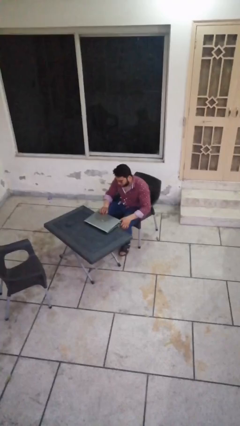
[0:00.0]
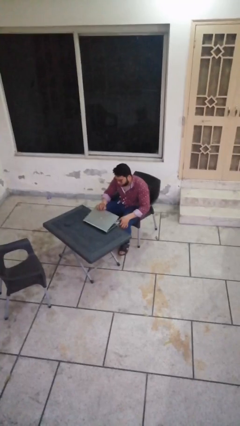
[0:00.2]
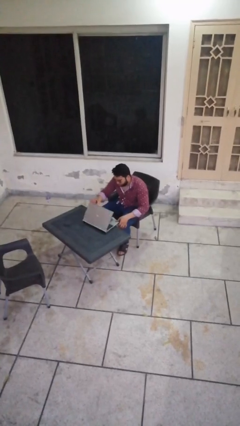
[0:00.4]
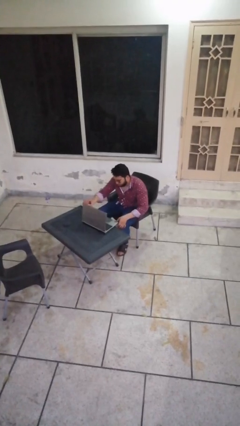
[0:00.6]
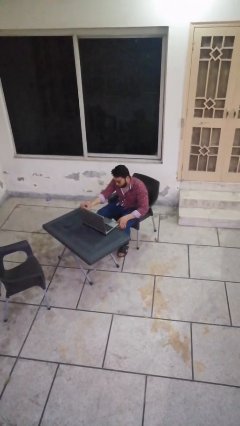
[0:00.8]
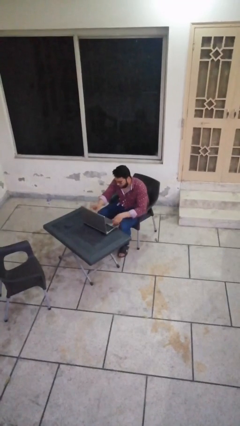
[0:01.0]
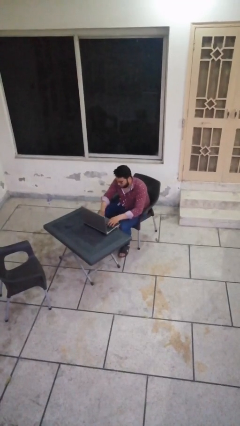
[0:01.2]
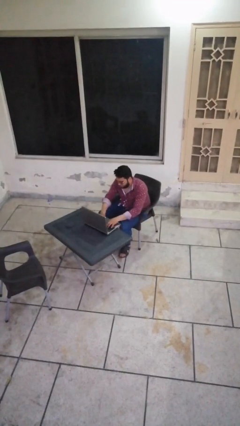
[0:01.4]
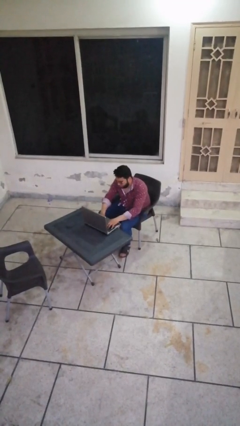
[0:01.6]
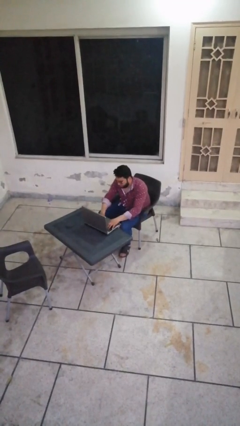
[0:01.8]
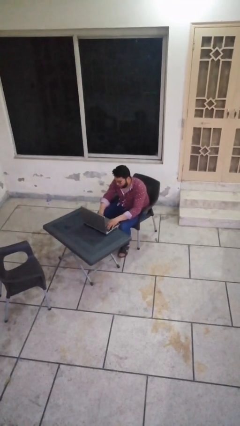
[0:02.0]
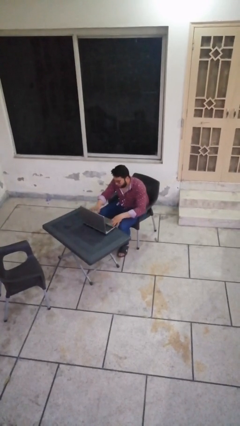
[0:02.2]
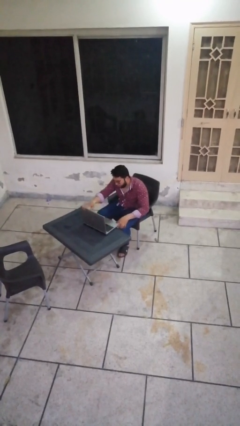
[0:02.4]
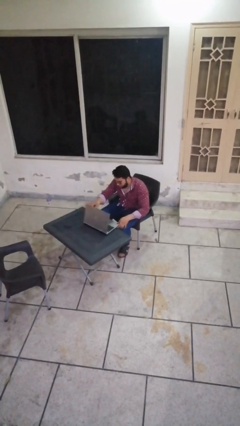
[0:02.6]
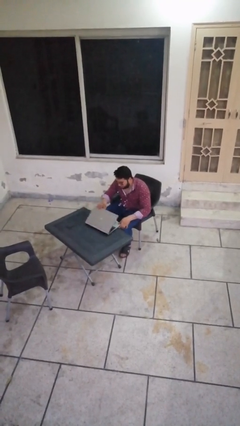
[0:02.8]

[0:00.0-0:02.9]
person interacts with laptop

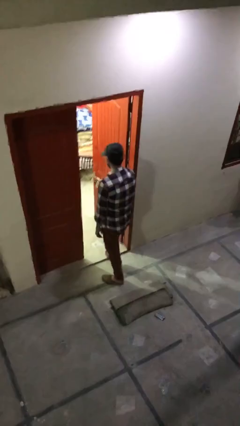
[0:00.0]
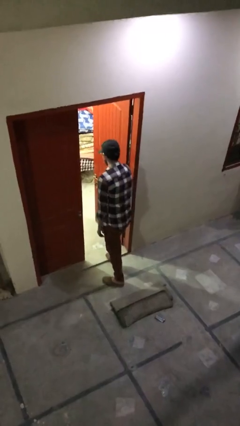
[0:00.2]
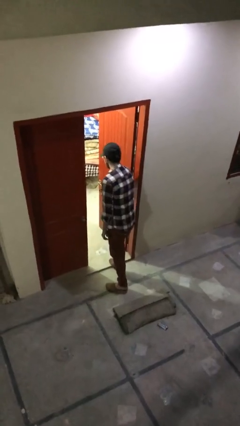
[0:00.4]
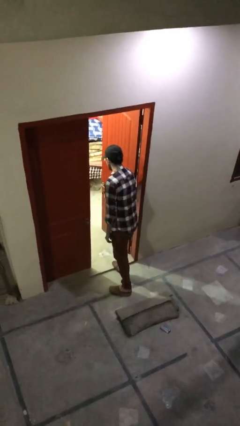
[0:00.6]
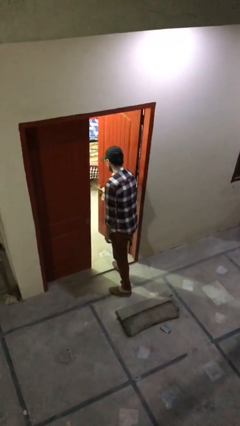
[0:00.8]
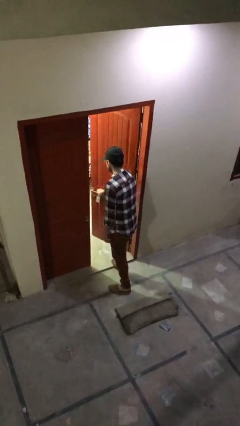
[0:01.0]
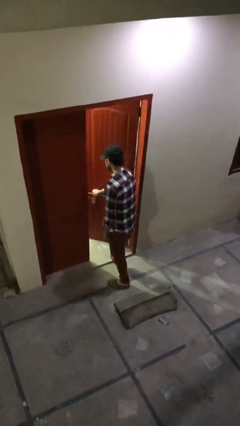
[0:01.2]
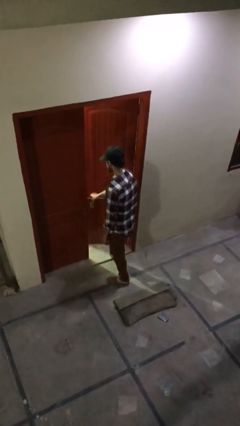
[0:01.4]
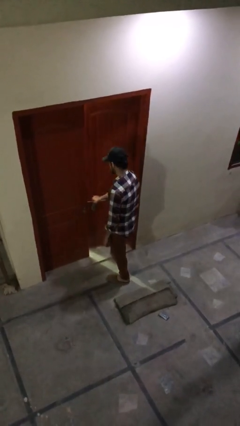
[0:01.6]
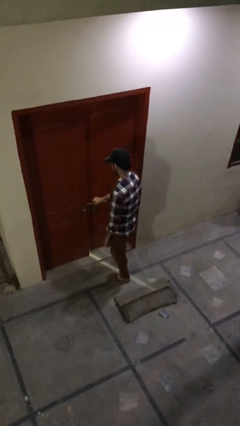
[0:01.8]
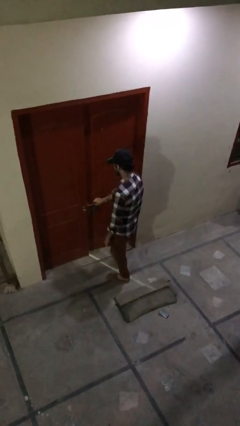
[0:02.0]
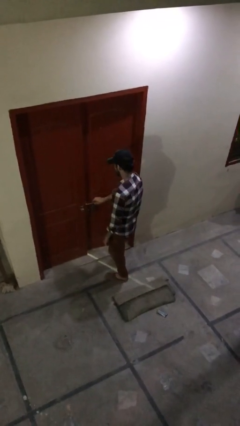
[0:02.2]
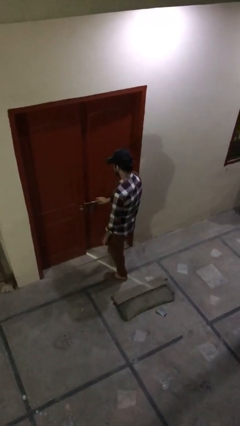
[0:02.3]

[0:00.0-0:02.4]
person closes facility door

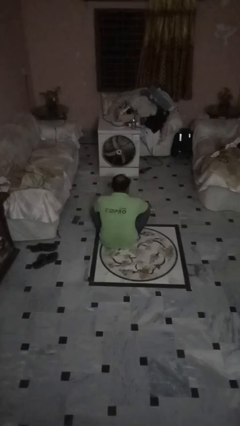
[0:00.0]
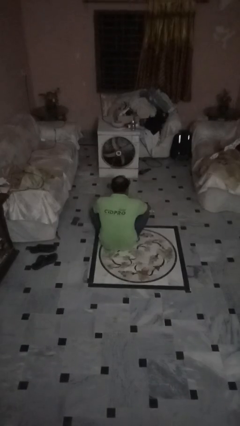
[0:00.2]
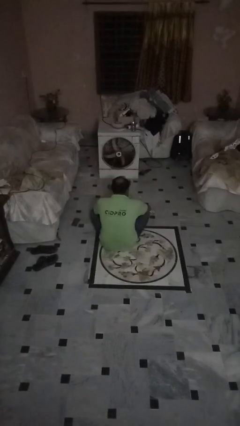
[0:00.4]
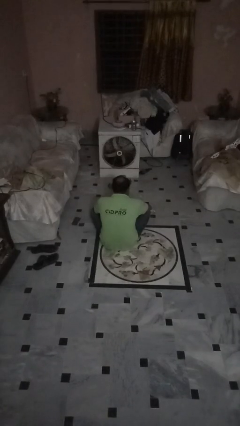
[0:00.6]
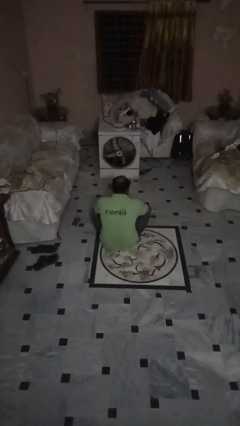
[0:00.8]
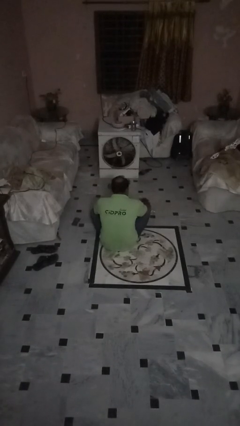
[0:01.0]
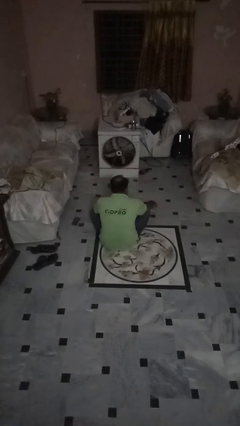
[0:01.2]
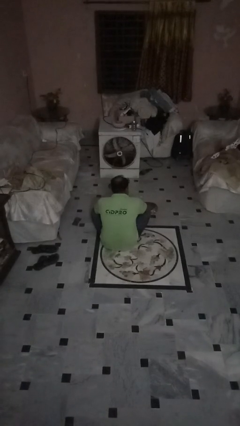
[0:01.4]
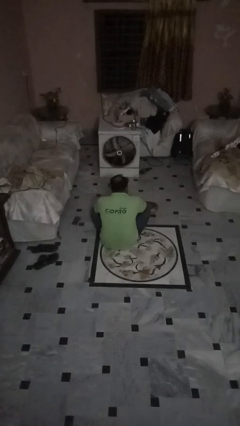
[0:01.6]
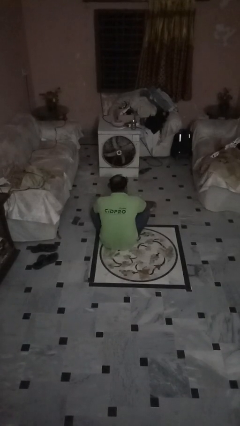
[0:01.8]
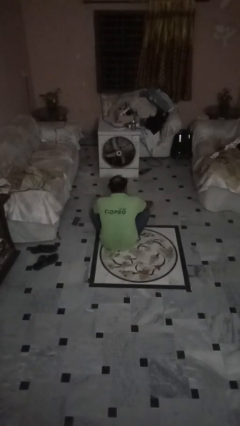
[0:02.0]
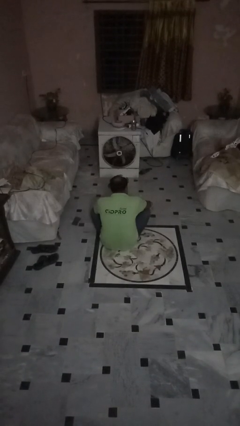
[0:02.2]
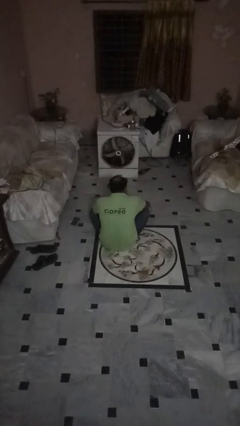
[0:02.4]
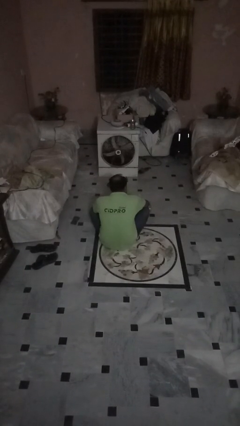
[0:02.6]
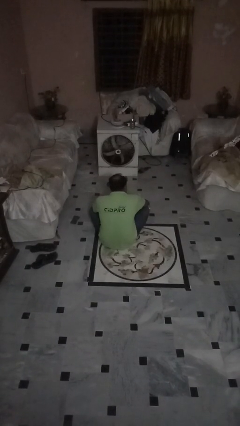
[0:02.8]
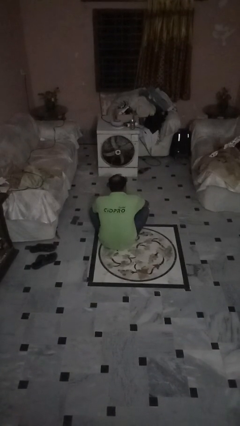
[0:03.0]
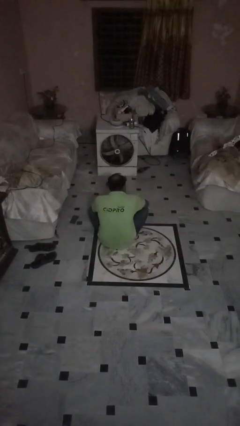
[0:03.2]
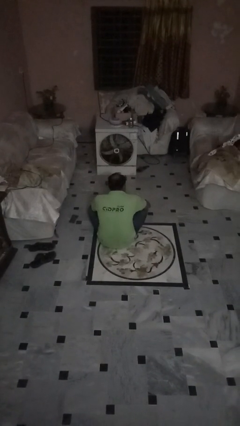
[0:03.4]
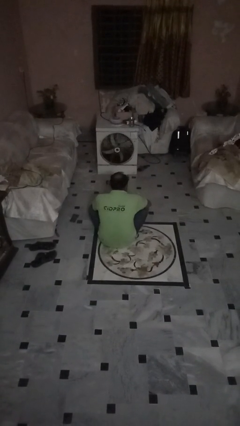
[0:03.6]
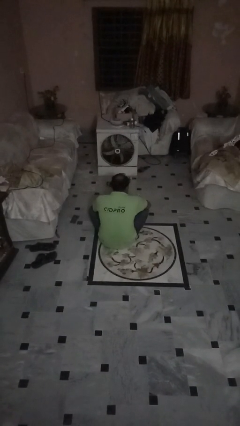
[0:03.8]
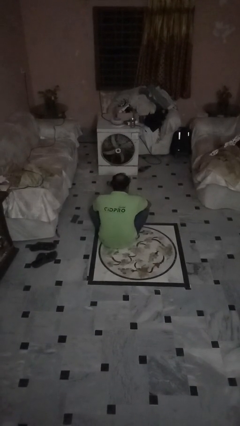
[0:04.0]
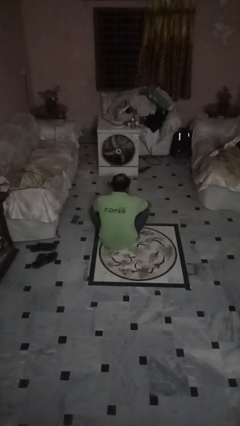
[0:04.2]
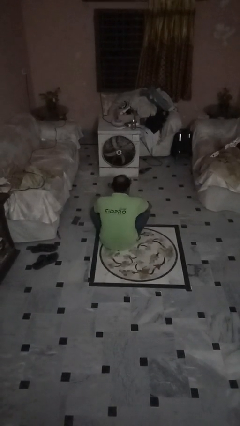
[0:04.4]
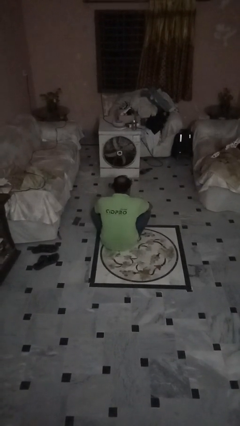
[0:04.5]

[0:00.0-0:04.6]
person spills on floor

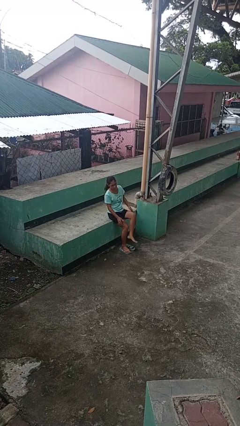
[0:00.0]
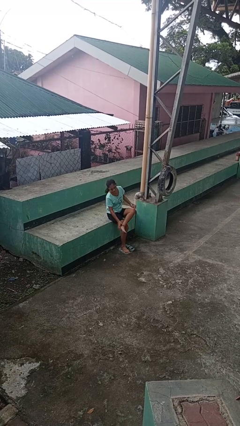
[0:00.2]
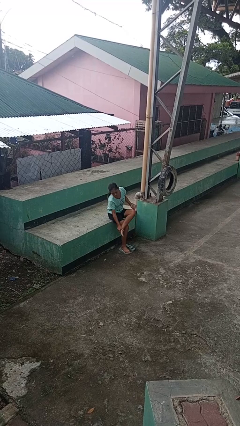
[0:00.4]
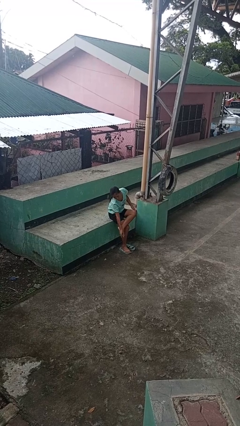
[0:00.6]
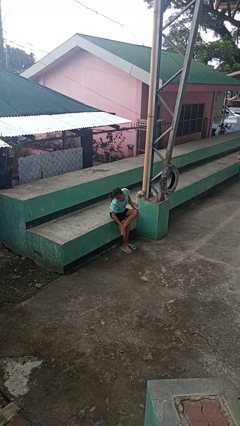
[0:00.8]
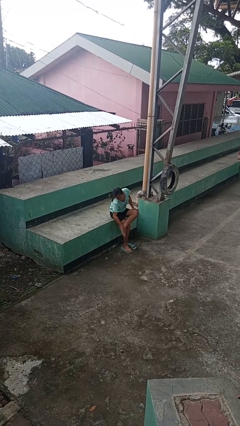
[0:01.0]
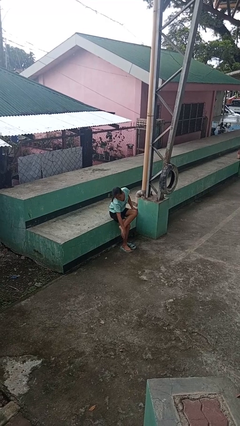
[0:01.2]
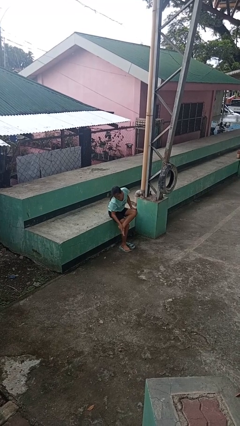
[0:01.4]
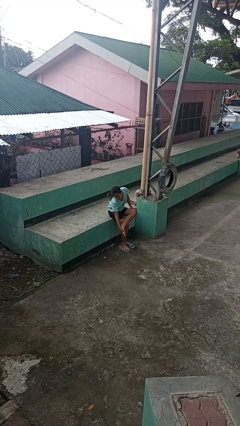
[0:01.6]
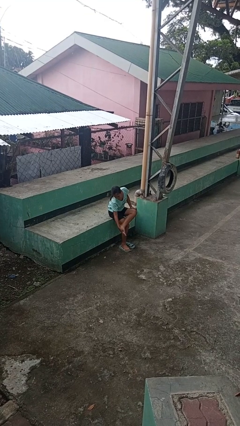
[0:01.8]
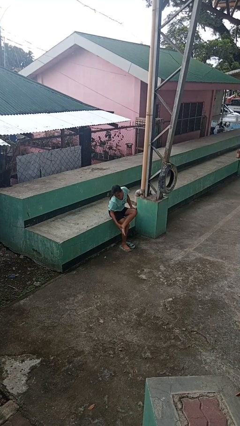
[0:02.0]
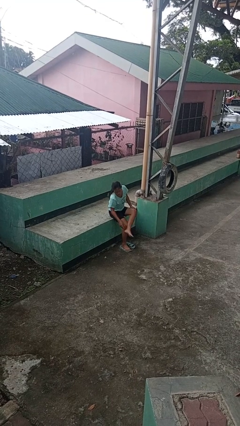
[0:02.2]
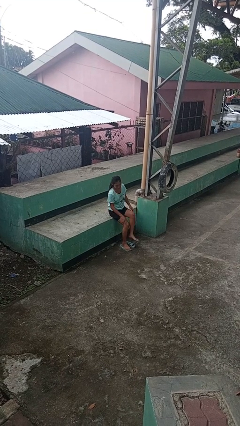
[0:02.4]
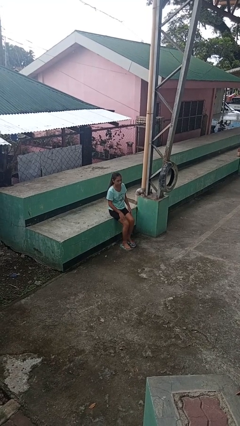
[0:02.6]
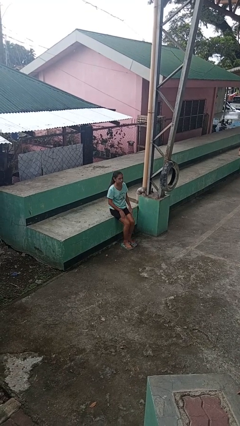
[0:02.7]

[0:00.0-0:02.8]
person rubs foot

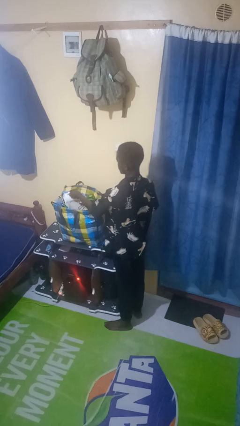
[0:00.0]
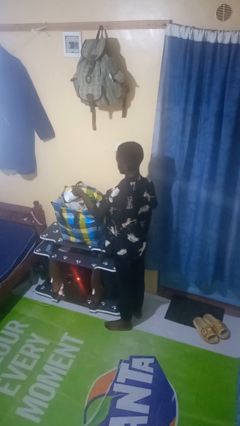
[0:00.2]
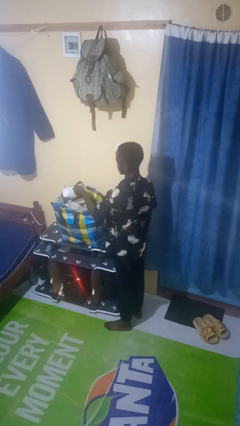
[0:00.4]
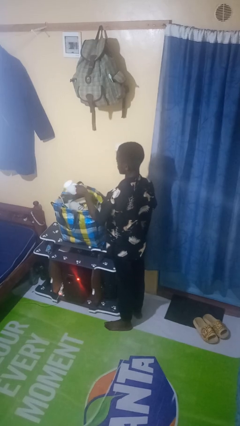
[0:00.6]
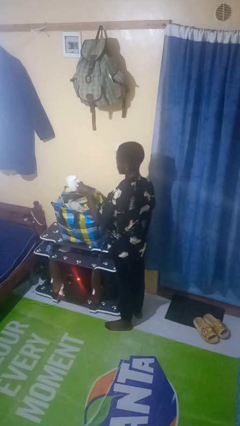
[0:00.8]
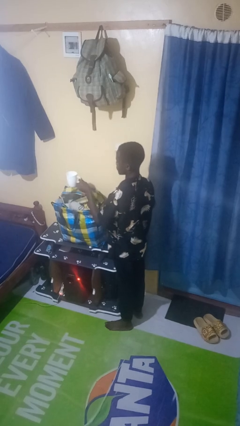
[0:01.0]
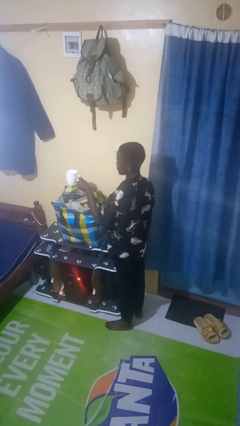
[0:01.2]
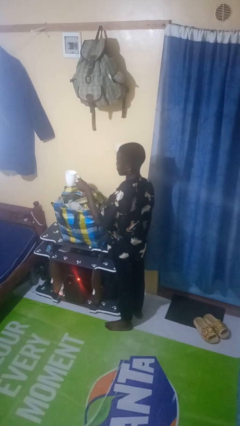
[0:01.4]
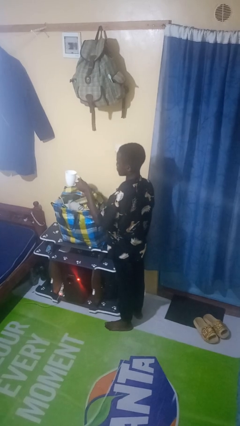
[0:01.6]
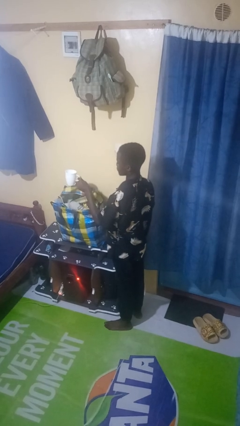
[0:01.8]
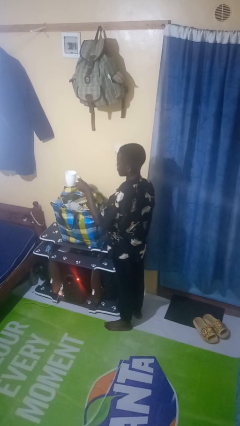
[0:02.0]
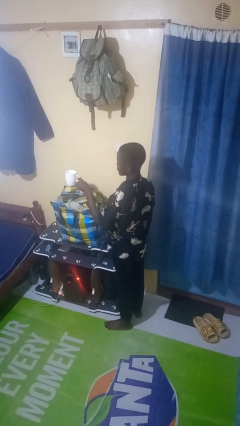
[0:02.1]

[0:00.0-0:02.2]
person takes object from bag

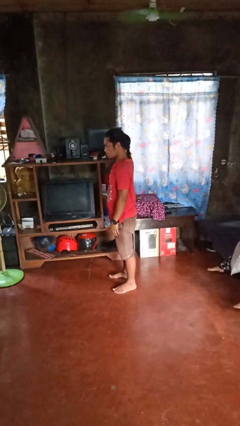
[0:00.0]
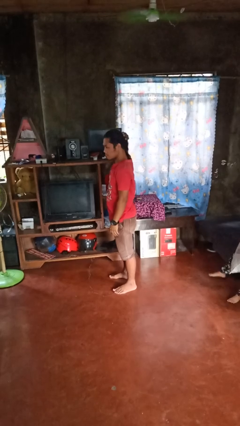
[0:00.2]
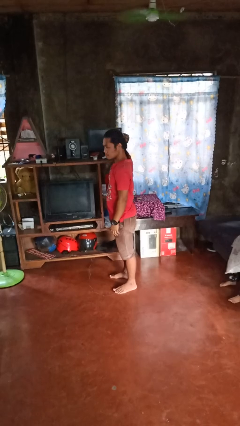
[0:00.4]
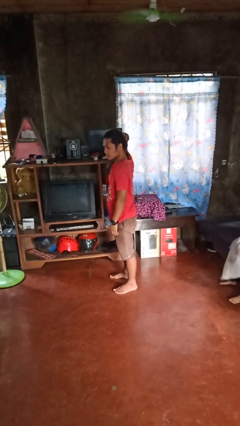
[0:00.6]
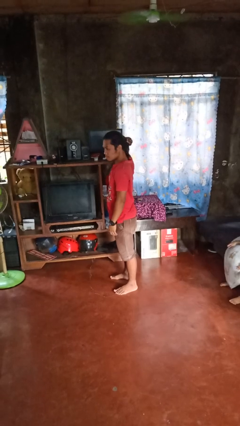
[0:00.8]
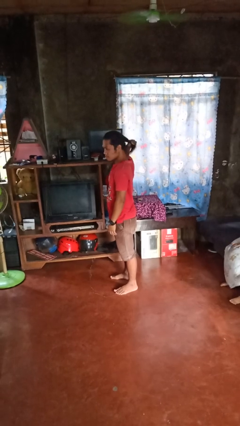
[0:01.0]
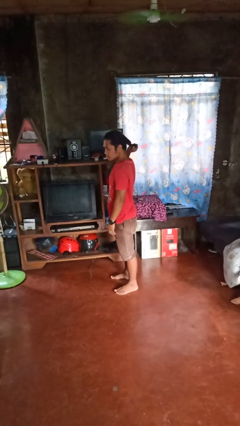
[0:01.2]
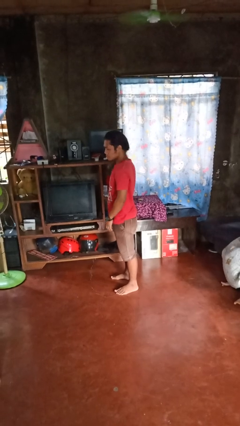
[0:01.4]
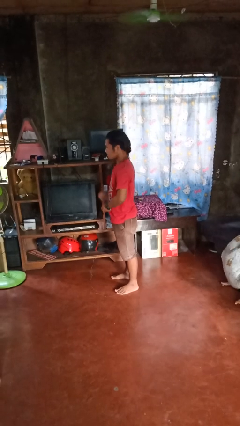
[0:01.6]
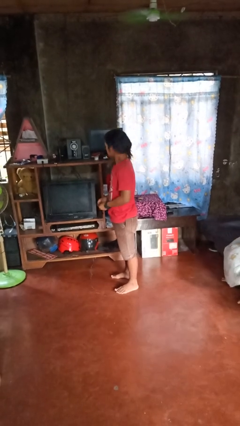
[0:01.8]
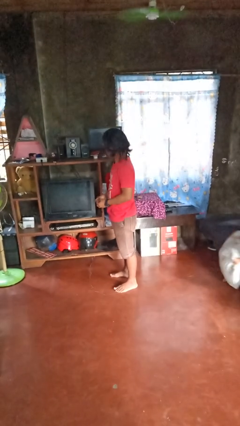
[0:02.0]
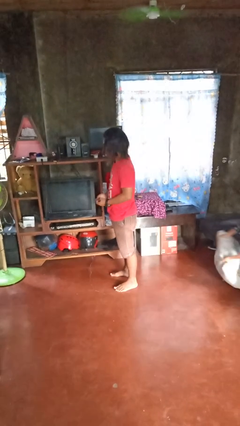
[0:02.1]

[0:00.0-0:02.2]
person takes off hairtie

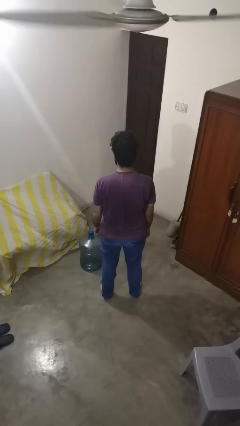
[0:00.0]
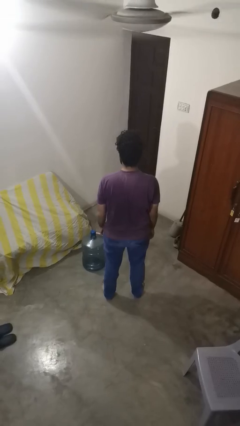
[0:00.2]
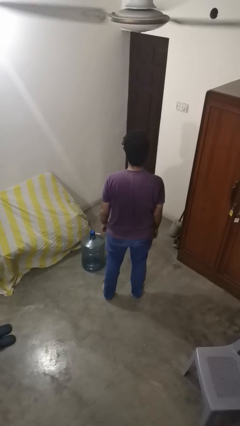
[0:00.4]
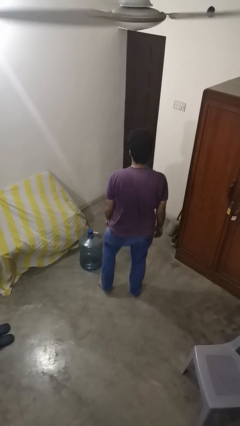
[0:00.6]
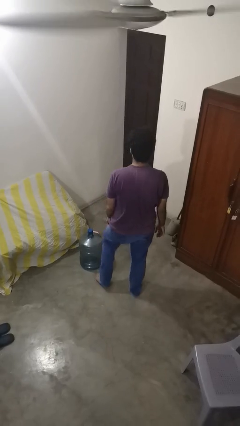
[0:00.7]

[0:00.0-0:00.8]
person trips on object on floor
